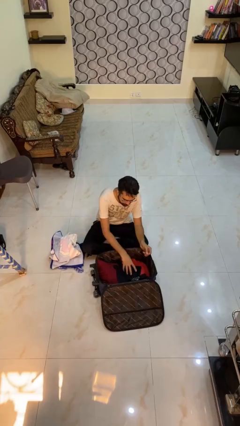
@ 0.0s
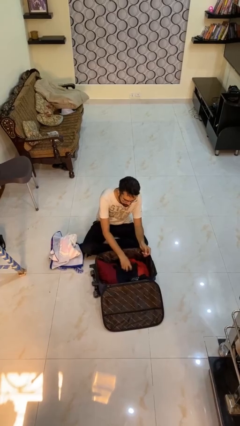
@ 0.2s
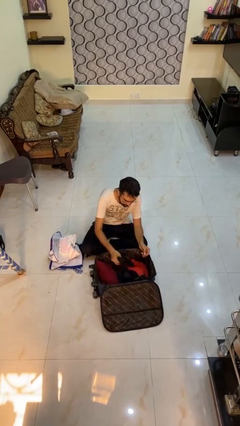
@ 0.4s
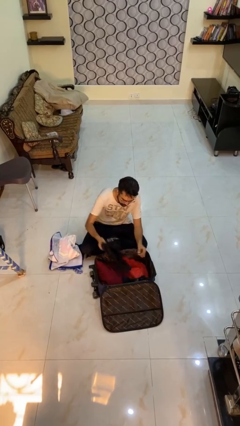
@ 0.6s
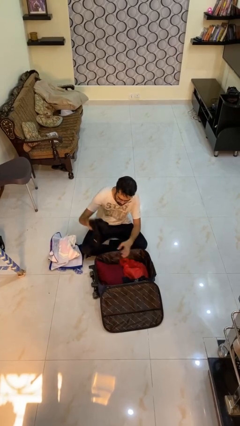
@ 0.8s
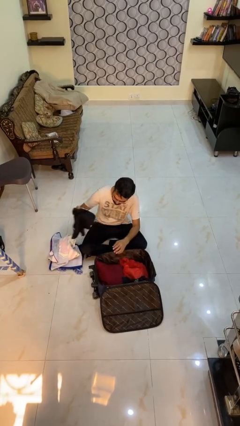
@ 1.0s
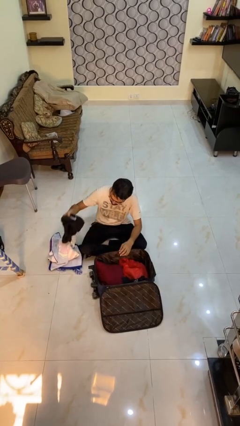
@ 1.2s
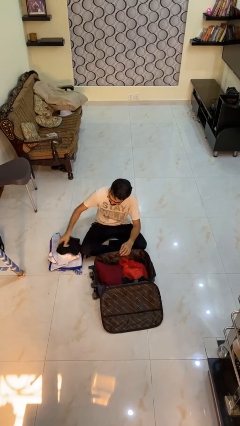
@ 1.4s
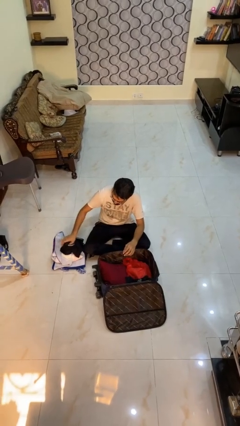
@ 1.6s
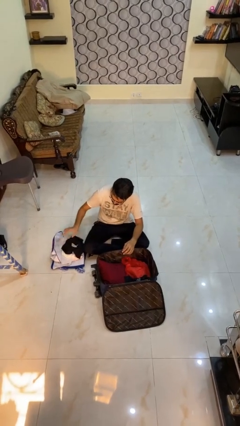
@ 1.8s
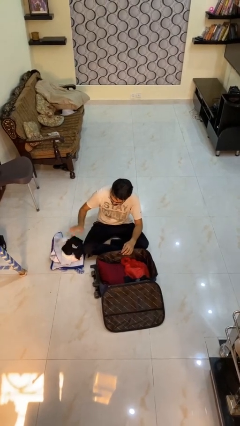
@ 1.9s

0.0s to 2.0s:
person unloads clothes from suitcase

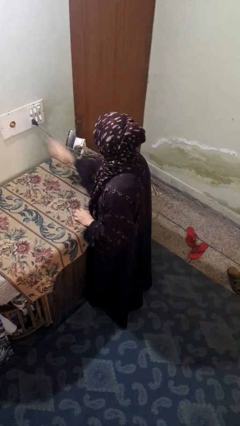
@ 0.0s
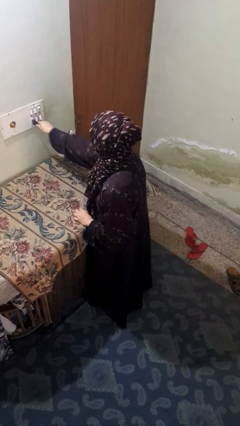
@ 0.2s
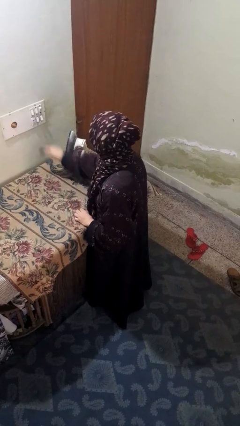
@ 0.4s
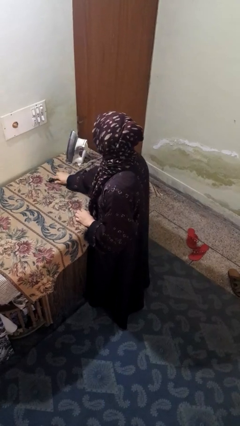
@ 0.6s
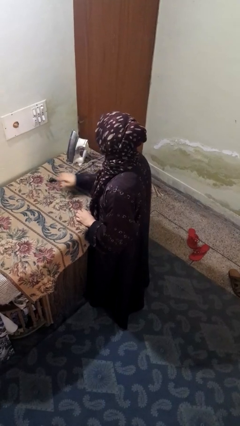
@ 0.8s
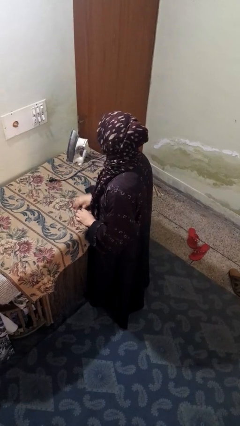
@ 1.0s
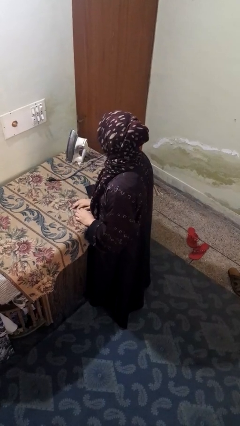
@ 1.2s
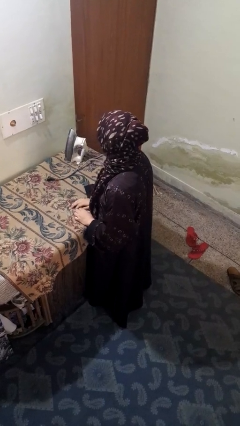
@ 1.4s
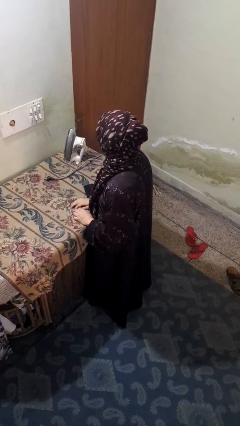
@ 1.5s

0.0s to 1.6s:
person unplugs from electrical socket

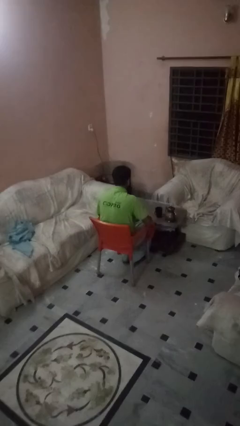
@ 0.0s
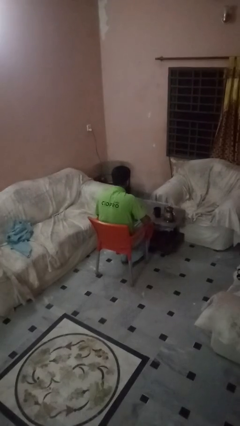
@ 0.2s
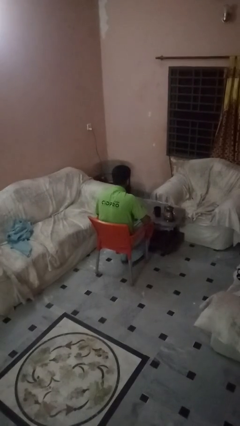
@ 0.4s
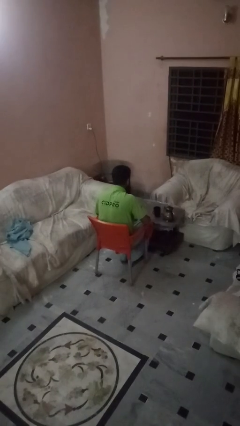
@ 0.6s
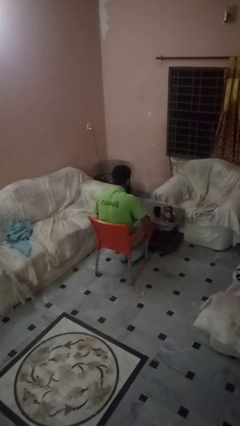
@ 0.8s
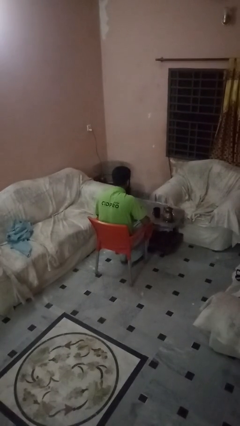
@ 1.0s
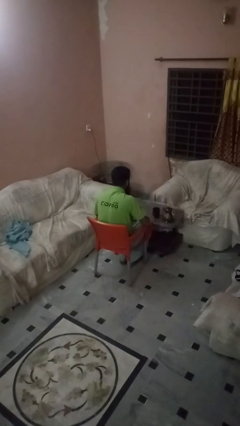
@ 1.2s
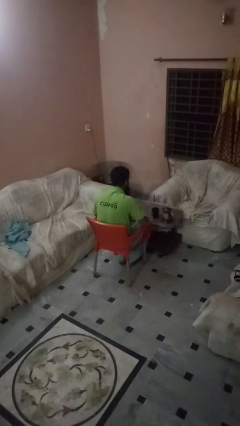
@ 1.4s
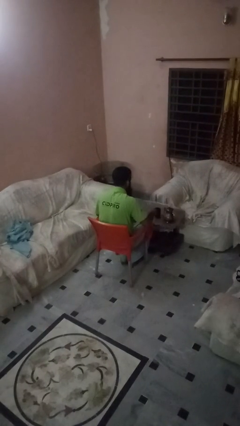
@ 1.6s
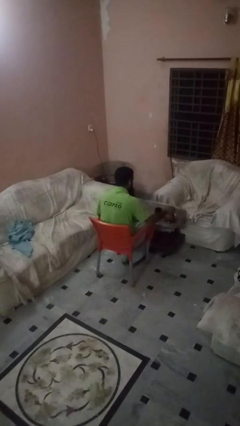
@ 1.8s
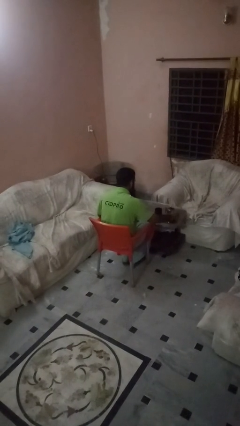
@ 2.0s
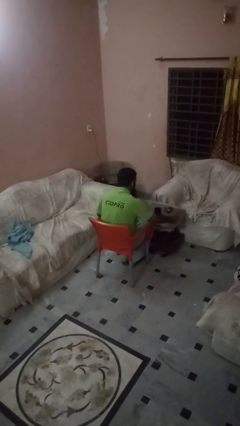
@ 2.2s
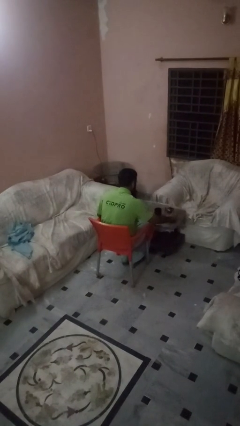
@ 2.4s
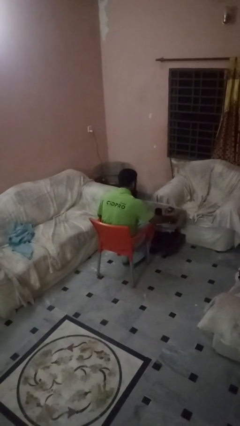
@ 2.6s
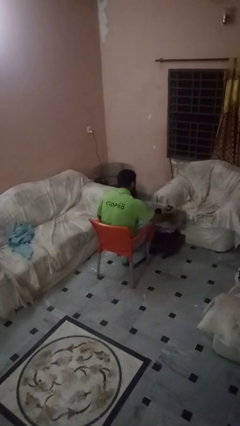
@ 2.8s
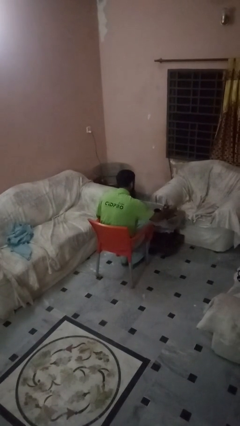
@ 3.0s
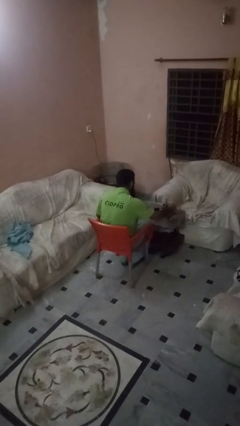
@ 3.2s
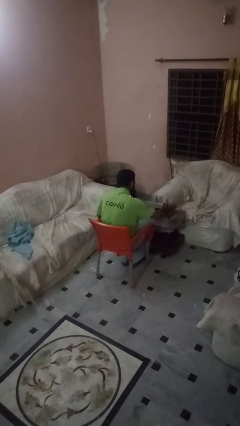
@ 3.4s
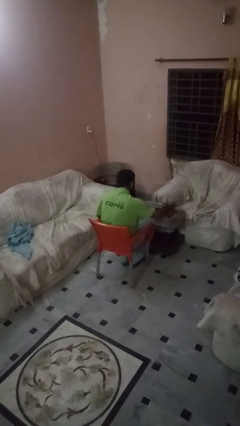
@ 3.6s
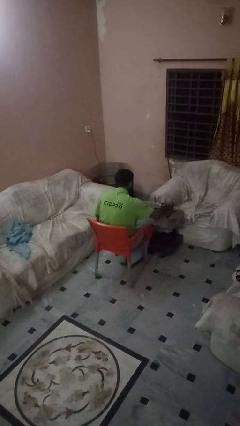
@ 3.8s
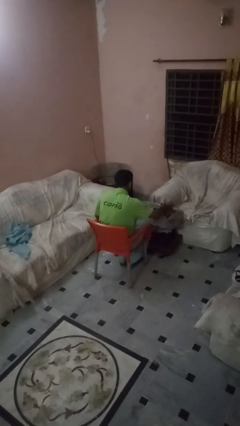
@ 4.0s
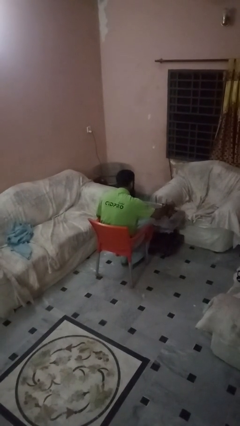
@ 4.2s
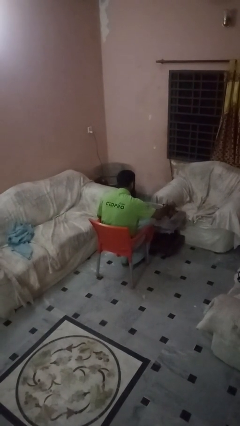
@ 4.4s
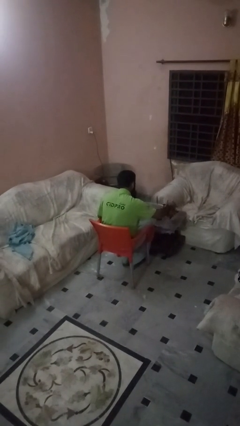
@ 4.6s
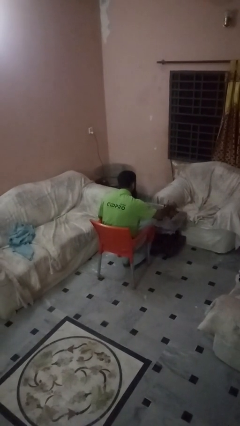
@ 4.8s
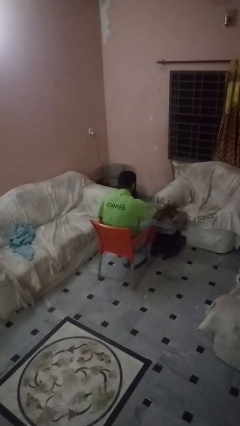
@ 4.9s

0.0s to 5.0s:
person pours coffee into mug

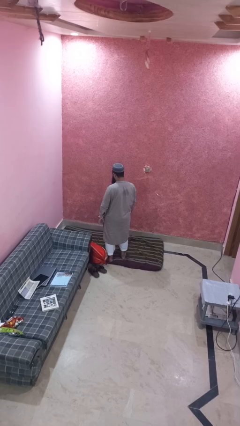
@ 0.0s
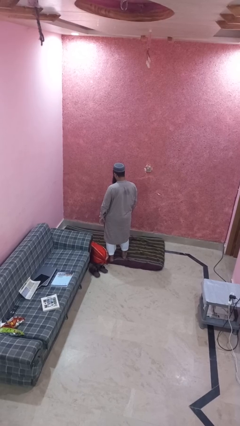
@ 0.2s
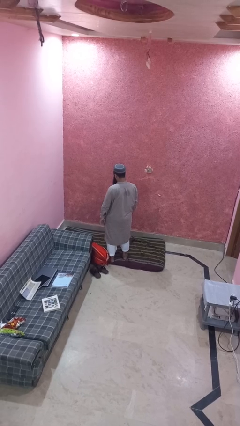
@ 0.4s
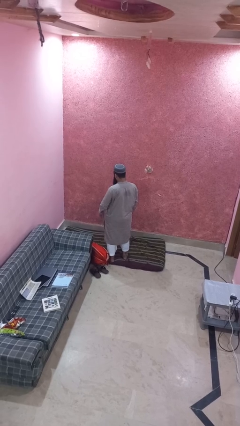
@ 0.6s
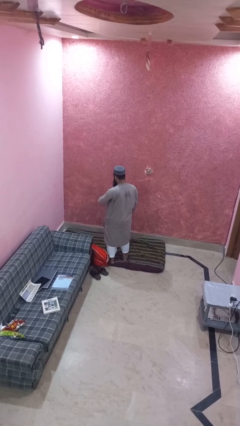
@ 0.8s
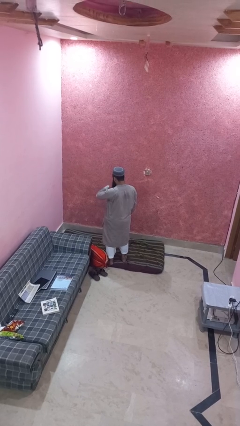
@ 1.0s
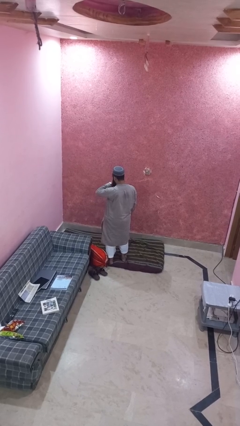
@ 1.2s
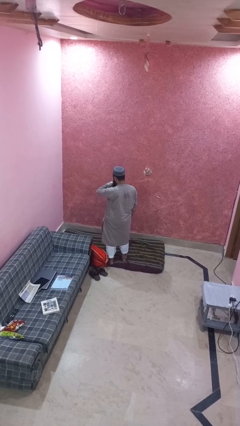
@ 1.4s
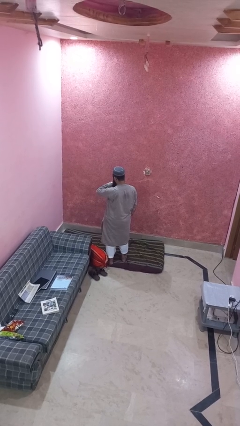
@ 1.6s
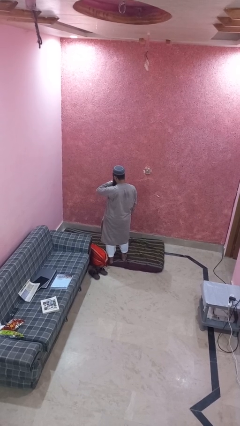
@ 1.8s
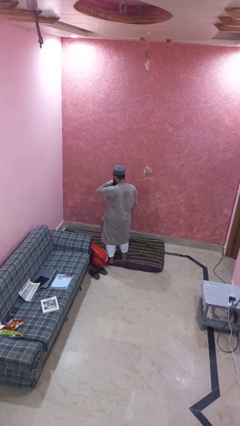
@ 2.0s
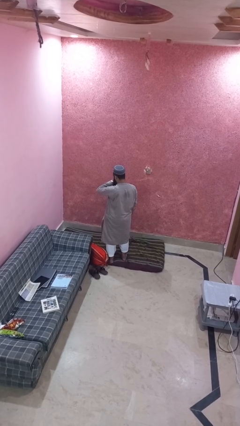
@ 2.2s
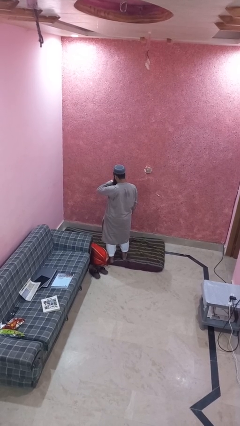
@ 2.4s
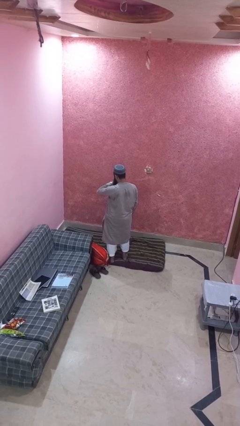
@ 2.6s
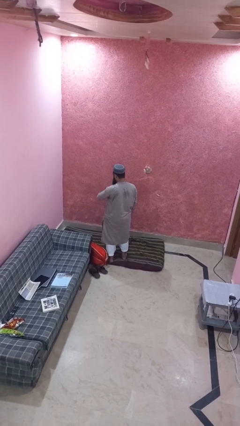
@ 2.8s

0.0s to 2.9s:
person looks at wristwatch

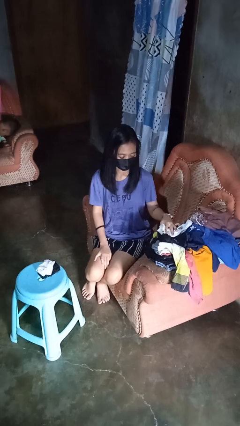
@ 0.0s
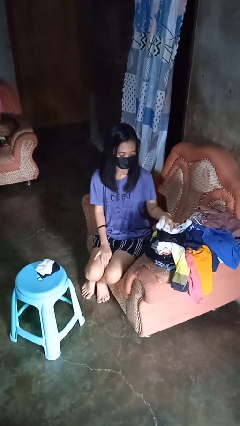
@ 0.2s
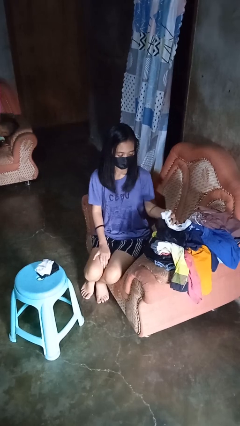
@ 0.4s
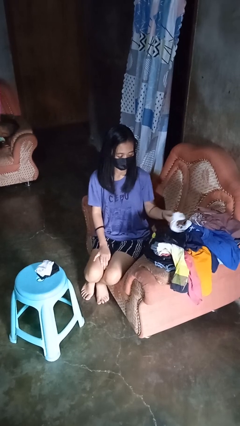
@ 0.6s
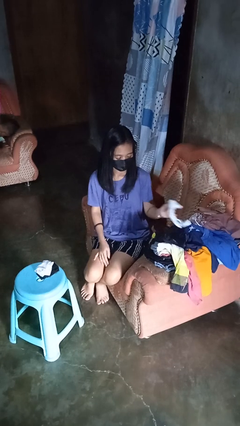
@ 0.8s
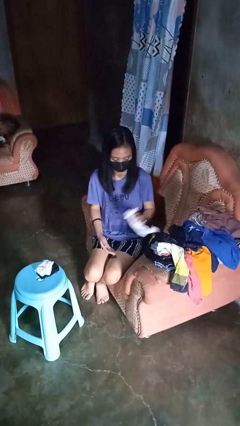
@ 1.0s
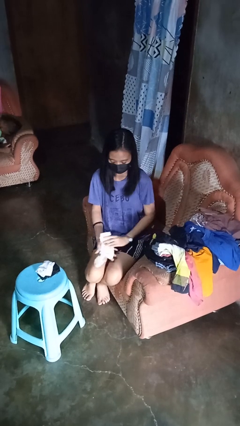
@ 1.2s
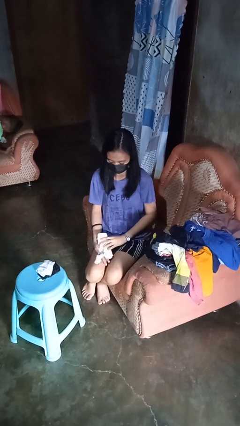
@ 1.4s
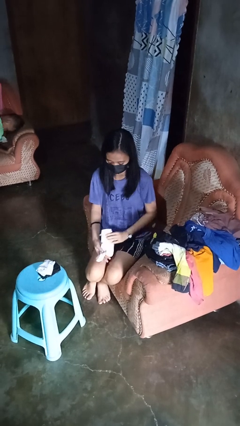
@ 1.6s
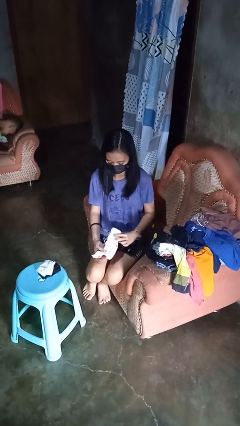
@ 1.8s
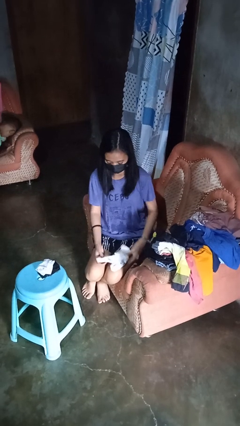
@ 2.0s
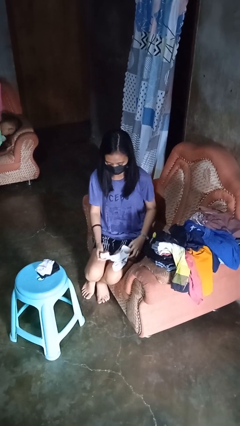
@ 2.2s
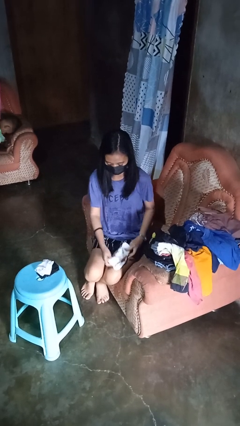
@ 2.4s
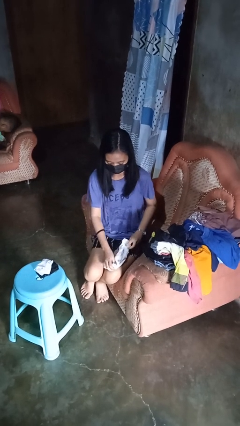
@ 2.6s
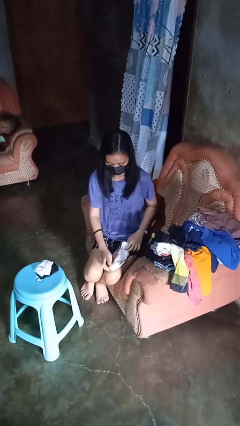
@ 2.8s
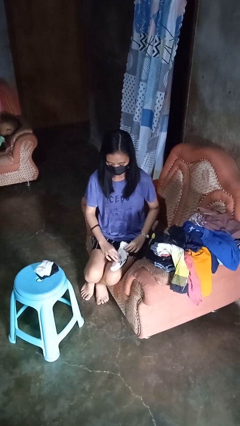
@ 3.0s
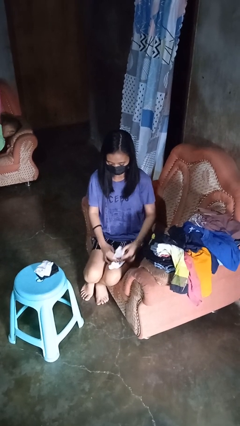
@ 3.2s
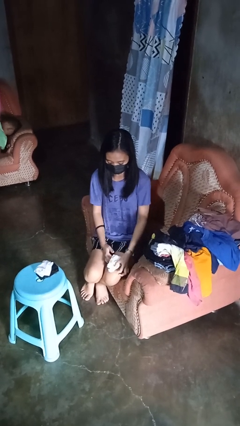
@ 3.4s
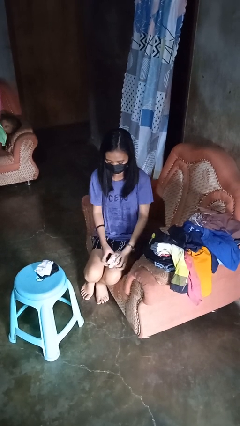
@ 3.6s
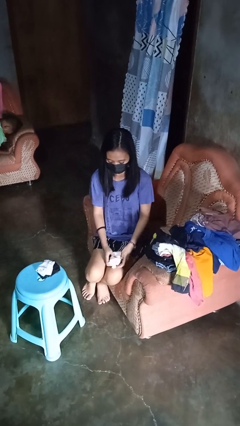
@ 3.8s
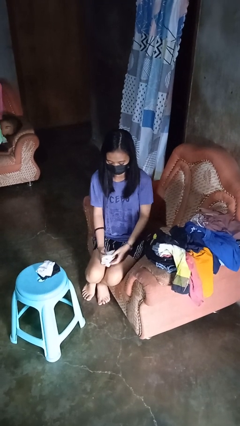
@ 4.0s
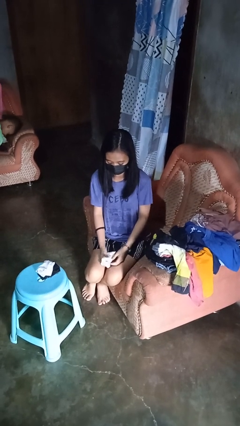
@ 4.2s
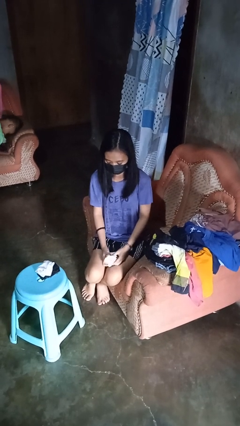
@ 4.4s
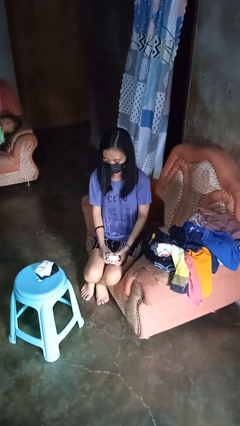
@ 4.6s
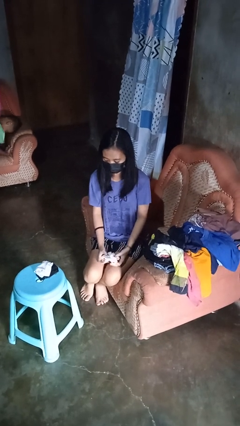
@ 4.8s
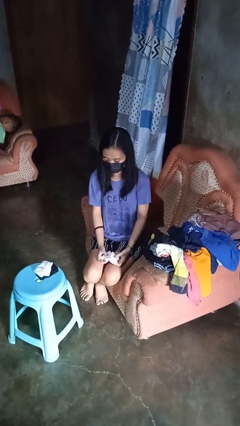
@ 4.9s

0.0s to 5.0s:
person folds socks

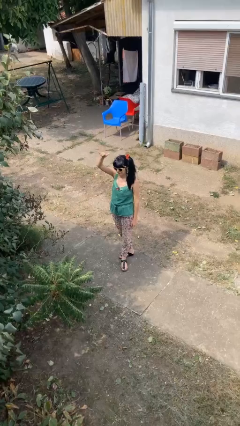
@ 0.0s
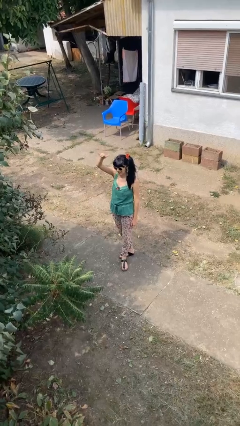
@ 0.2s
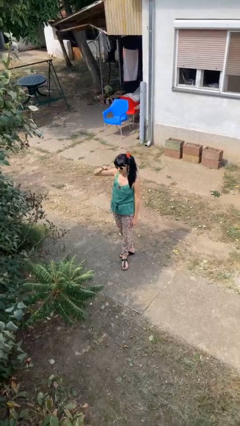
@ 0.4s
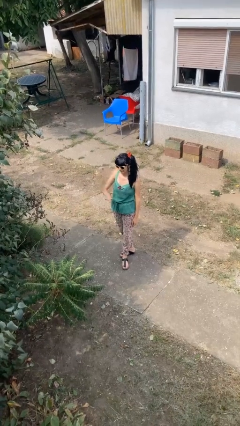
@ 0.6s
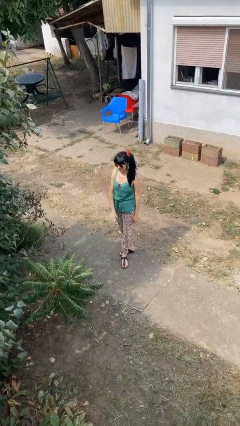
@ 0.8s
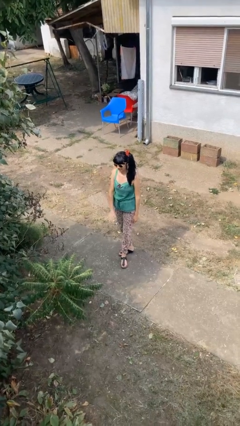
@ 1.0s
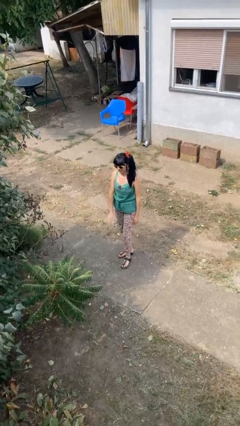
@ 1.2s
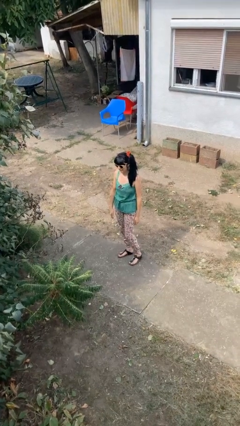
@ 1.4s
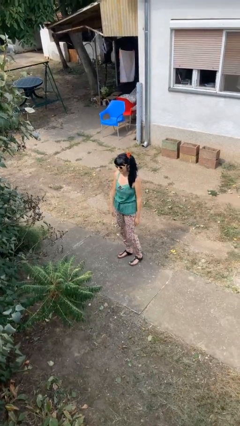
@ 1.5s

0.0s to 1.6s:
person gestures swipe down
